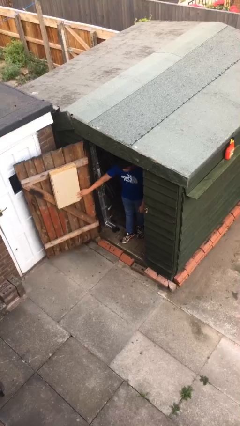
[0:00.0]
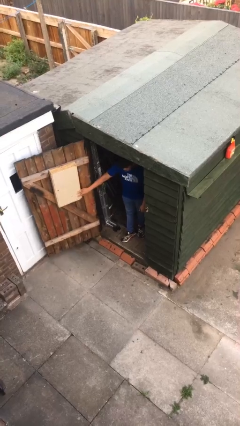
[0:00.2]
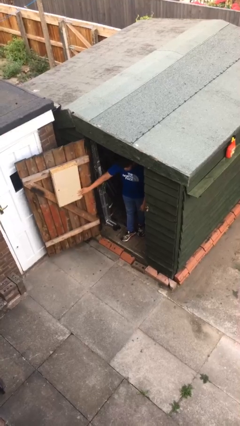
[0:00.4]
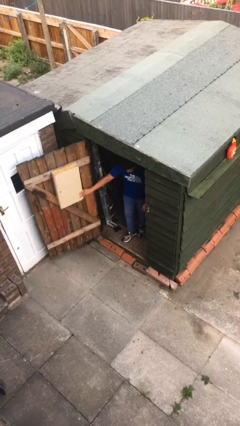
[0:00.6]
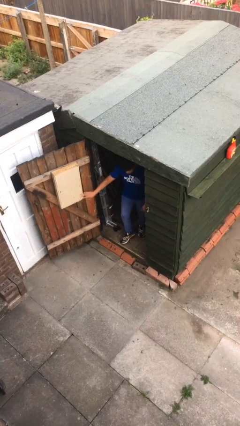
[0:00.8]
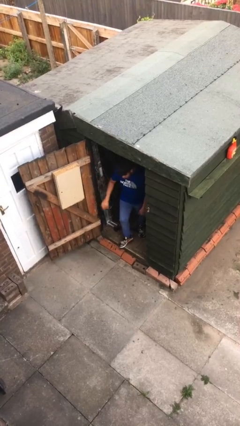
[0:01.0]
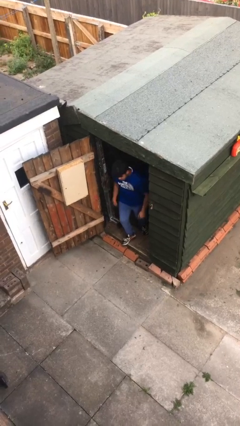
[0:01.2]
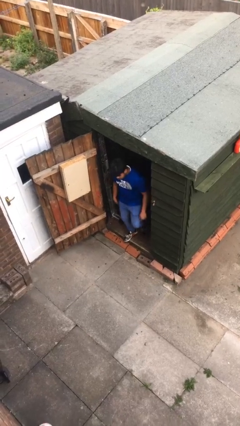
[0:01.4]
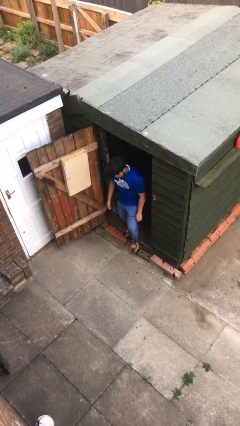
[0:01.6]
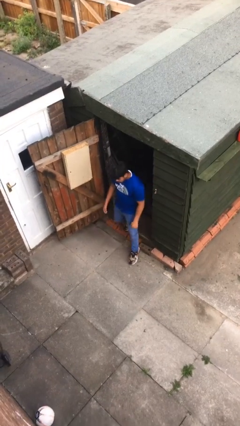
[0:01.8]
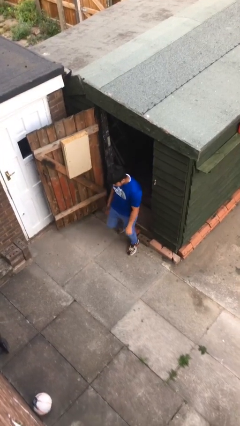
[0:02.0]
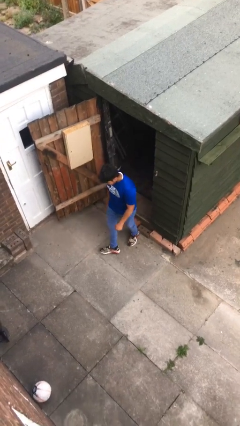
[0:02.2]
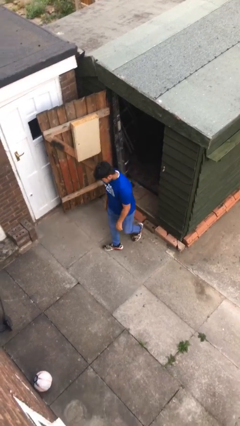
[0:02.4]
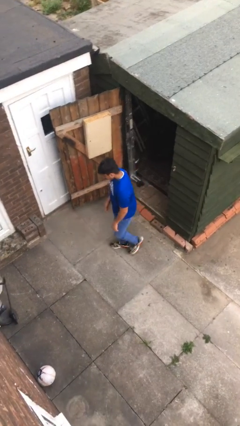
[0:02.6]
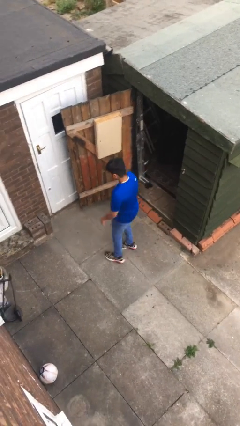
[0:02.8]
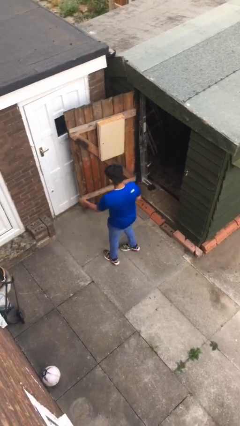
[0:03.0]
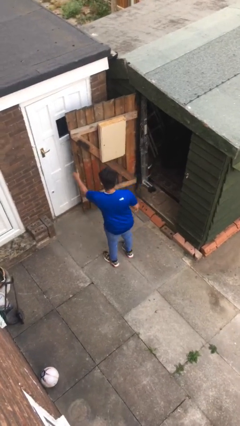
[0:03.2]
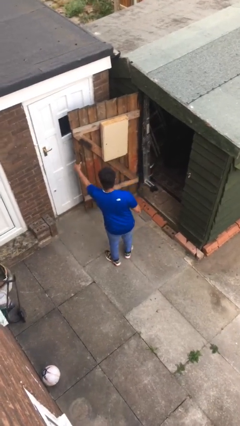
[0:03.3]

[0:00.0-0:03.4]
person enters scene through structure

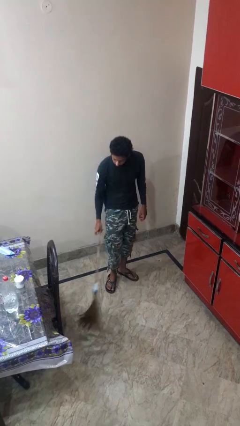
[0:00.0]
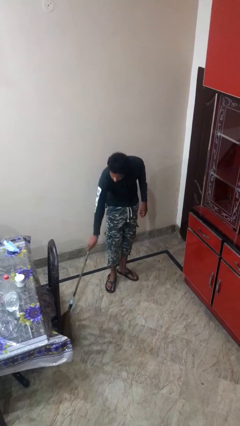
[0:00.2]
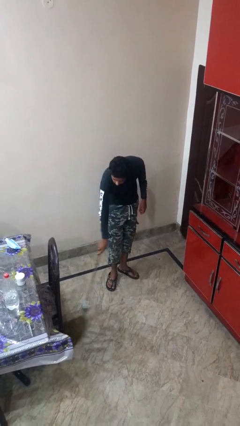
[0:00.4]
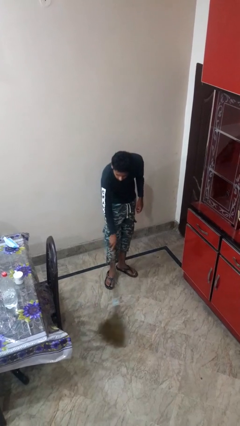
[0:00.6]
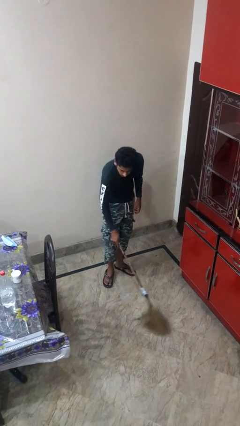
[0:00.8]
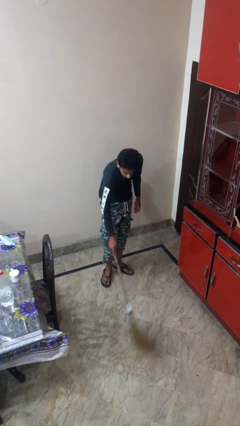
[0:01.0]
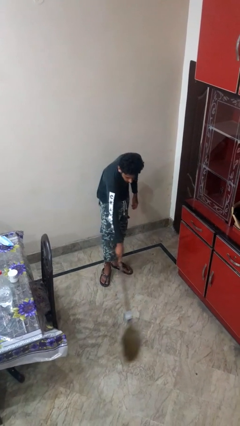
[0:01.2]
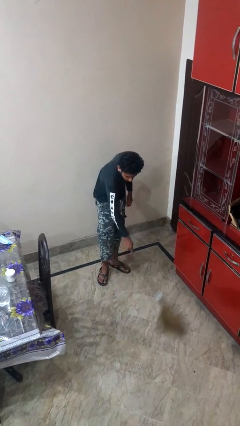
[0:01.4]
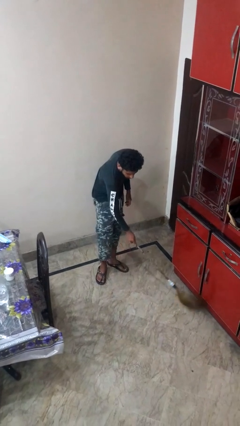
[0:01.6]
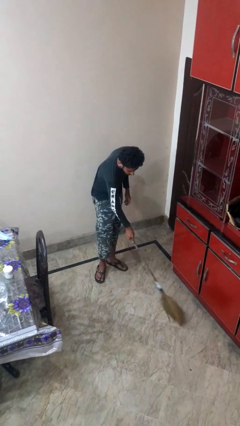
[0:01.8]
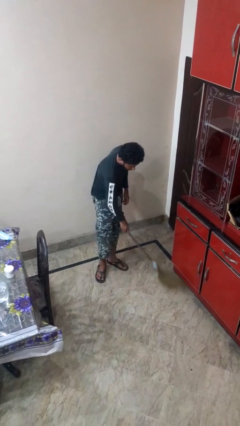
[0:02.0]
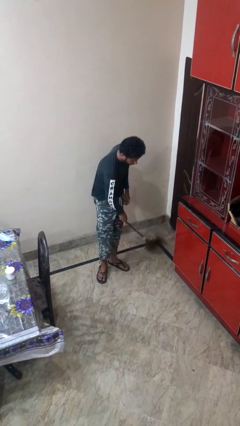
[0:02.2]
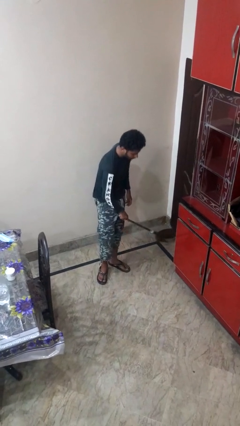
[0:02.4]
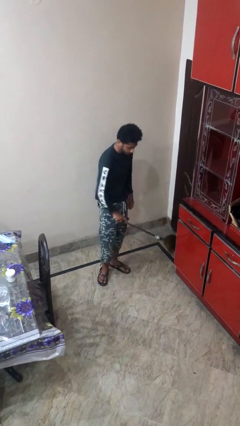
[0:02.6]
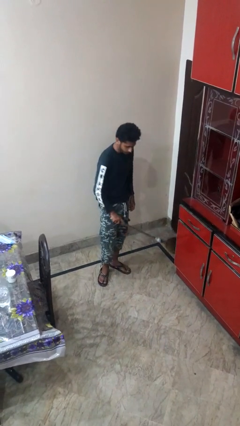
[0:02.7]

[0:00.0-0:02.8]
person sweeps floor

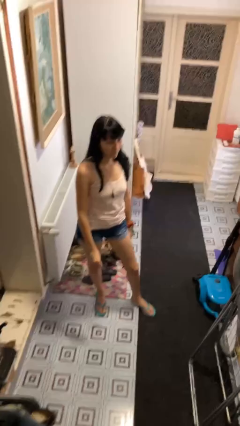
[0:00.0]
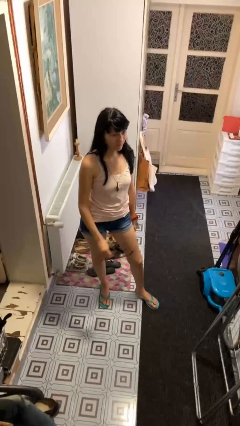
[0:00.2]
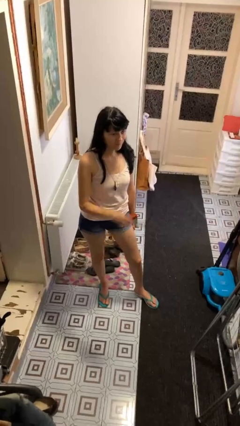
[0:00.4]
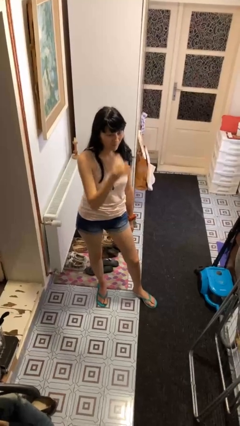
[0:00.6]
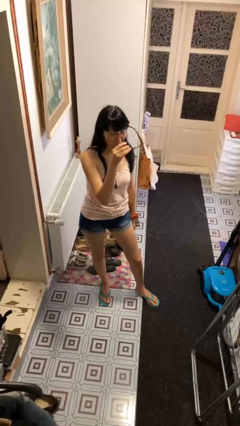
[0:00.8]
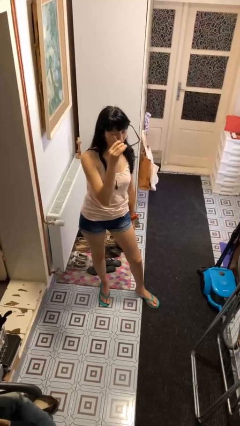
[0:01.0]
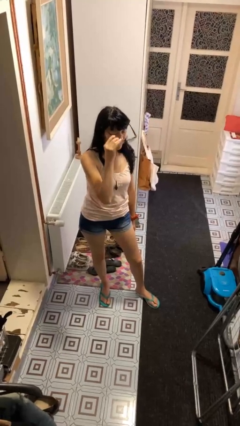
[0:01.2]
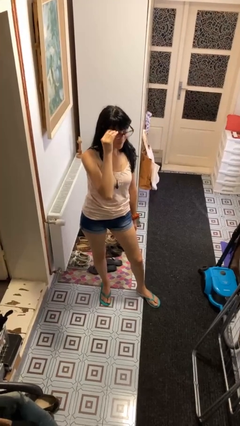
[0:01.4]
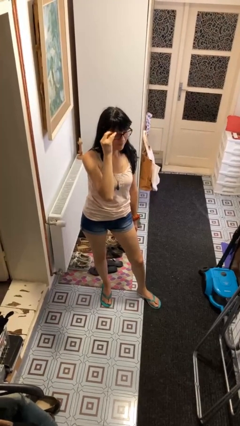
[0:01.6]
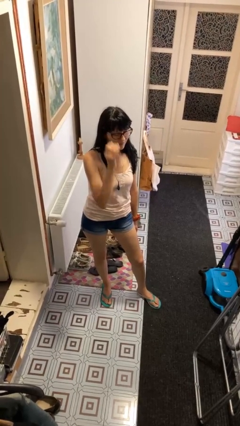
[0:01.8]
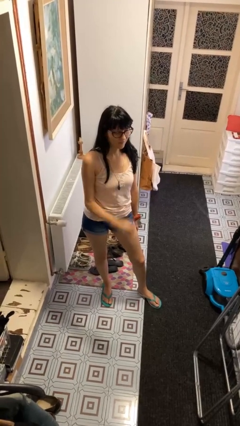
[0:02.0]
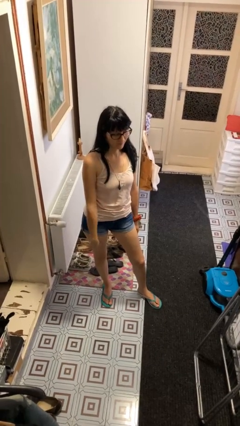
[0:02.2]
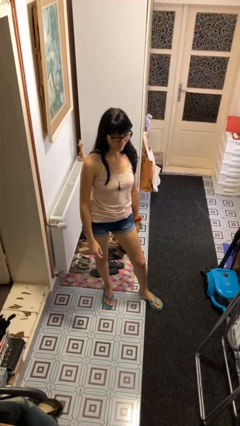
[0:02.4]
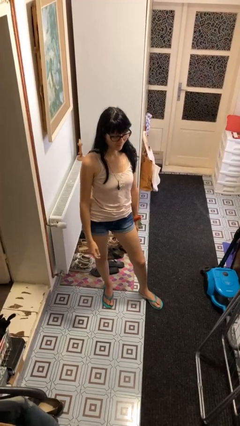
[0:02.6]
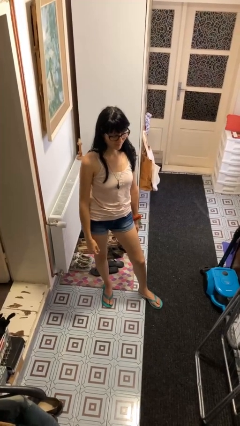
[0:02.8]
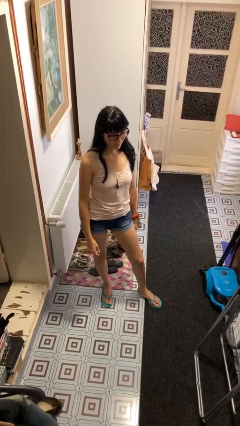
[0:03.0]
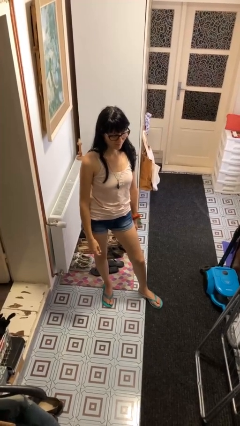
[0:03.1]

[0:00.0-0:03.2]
person puts on glasses

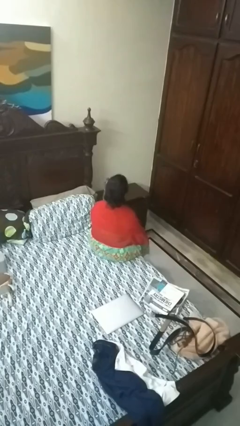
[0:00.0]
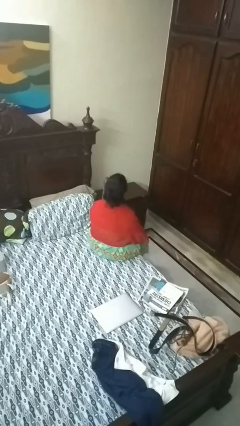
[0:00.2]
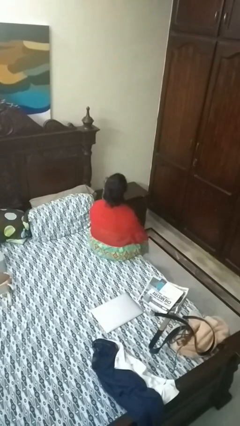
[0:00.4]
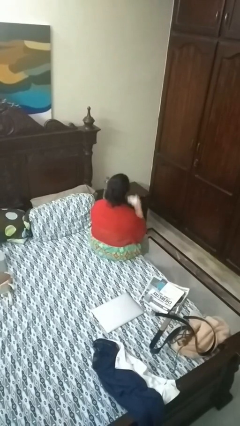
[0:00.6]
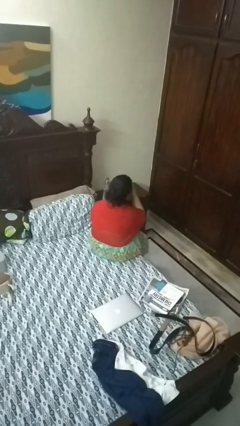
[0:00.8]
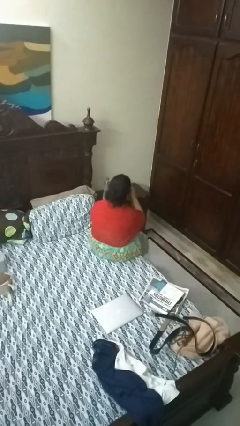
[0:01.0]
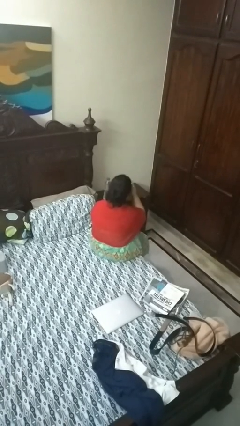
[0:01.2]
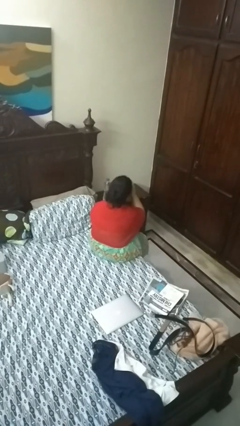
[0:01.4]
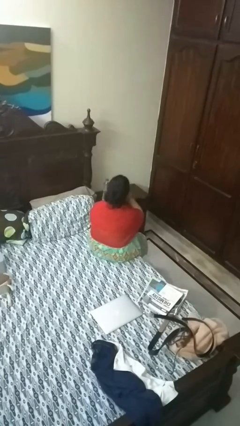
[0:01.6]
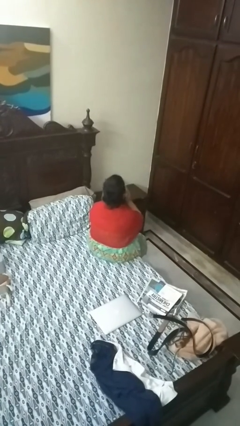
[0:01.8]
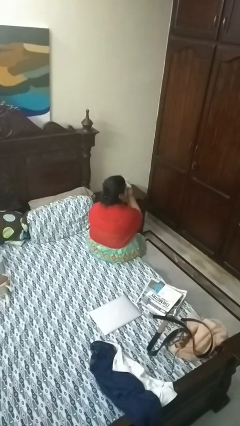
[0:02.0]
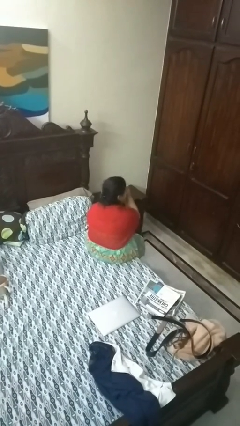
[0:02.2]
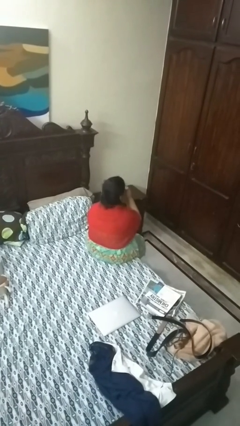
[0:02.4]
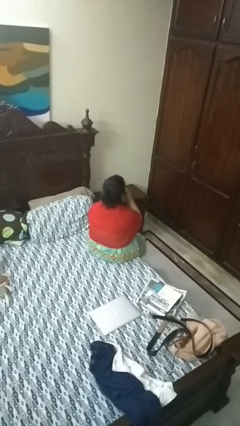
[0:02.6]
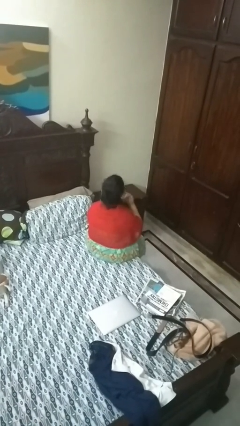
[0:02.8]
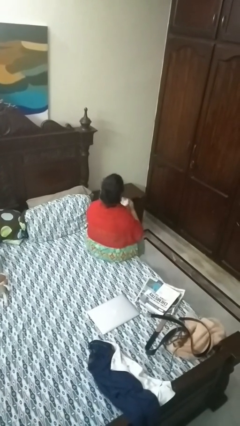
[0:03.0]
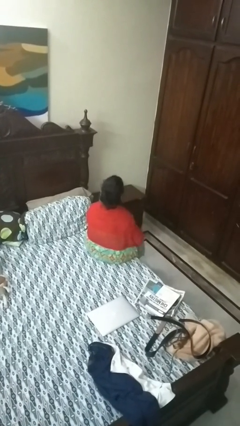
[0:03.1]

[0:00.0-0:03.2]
person wipes mouth with napkin

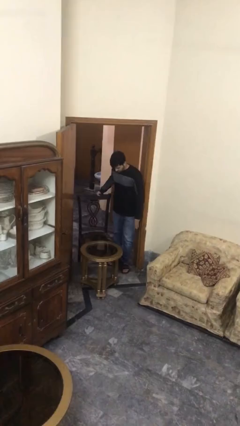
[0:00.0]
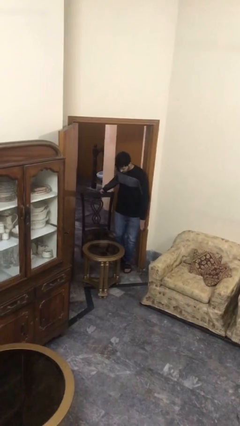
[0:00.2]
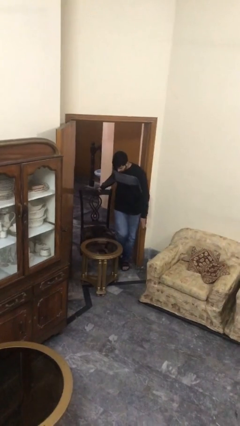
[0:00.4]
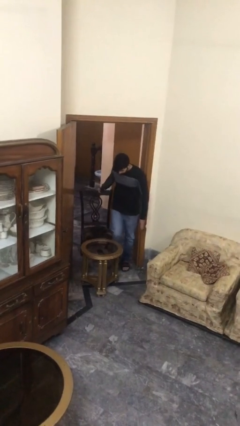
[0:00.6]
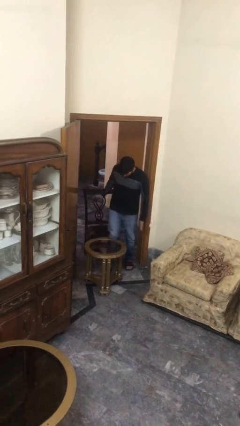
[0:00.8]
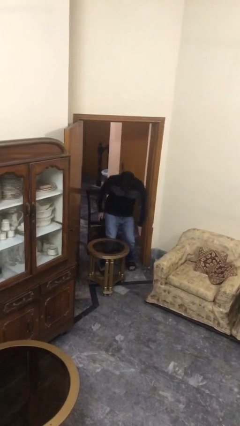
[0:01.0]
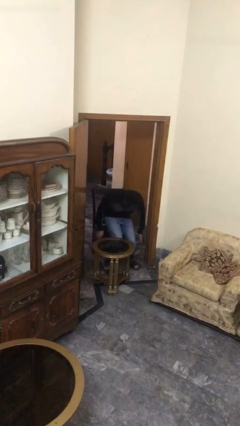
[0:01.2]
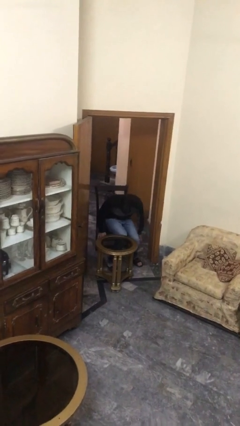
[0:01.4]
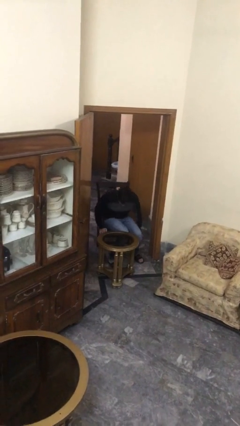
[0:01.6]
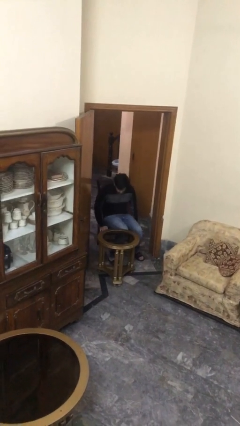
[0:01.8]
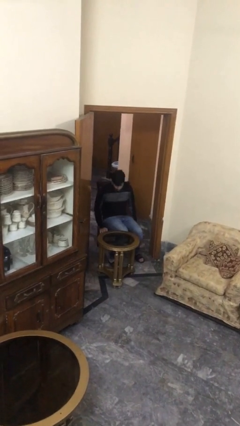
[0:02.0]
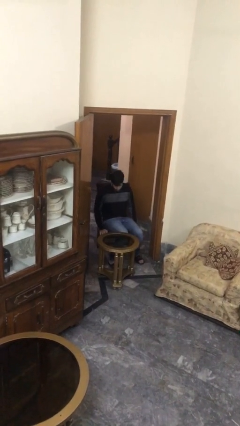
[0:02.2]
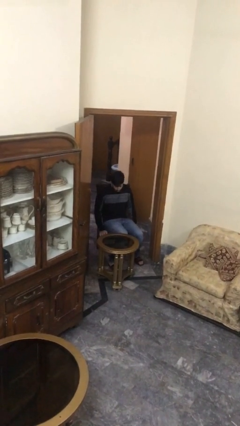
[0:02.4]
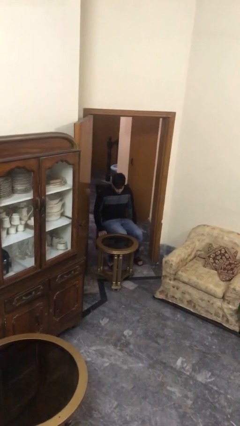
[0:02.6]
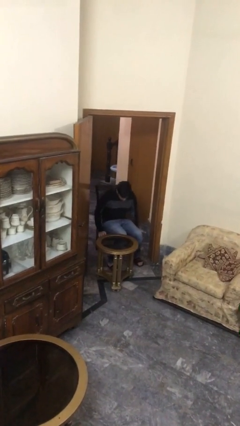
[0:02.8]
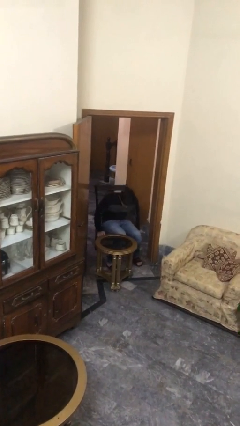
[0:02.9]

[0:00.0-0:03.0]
person sits down

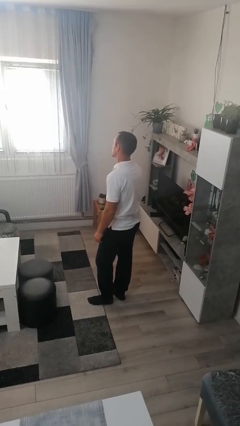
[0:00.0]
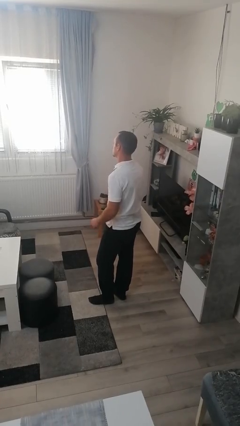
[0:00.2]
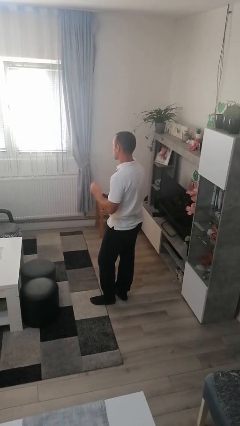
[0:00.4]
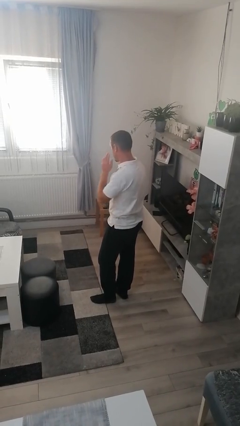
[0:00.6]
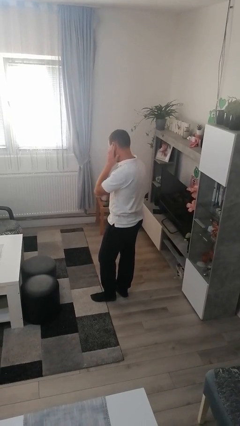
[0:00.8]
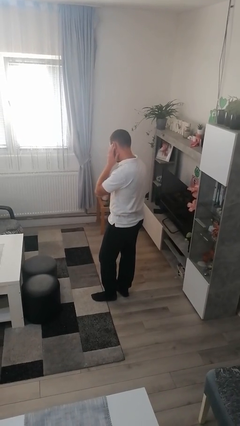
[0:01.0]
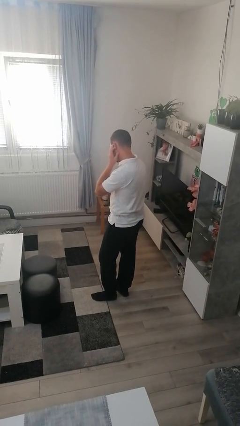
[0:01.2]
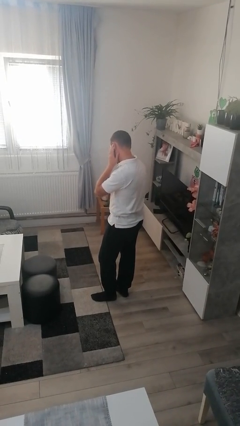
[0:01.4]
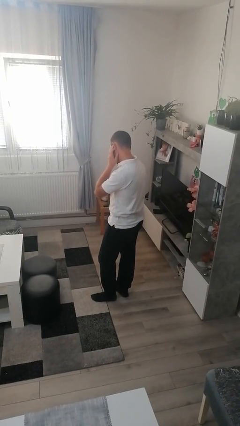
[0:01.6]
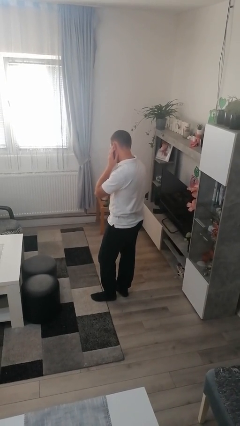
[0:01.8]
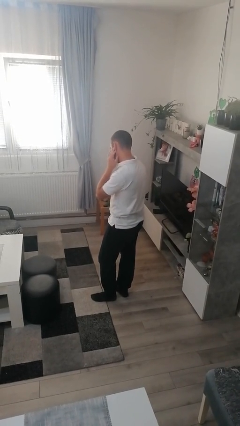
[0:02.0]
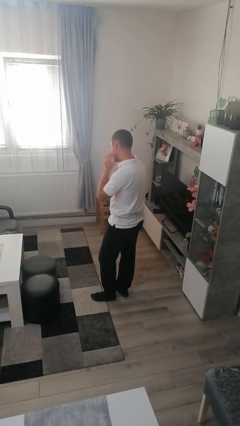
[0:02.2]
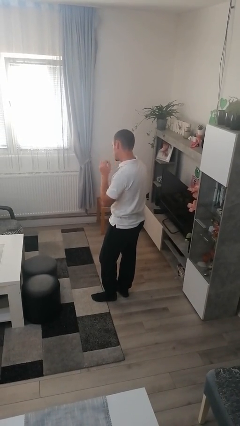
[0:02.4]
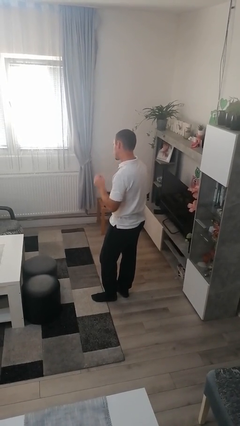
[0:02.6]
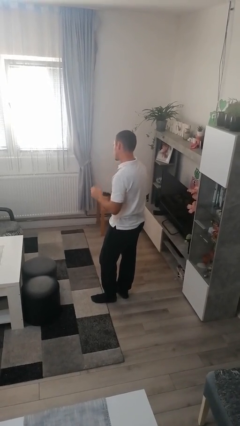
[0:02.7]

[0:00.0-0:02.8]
person touches earlobe
